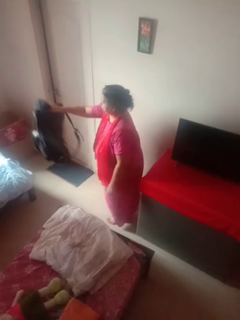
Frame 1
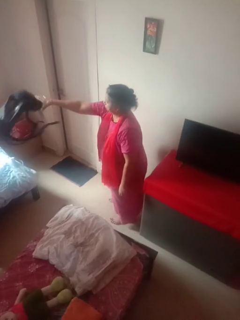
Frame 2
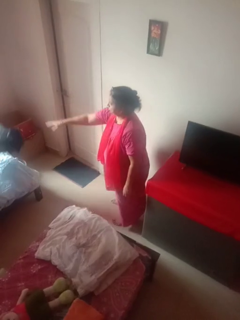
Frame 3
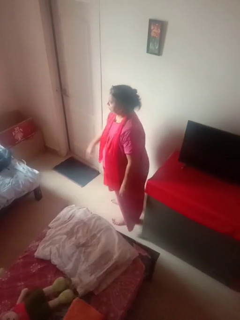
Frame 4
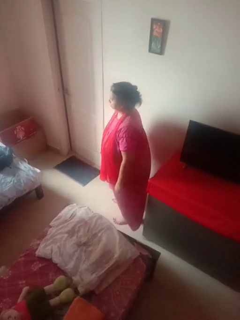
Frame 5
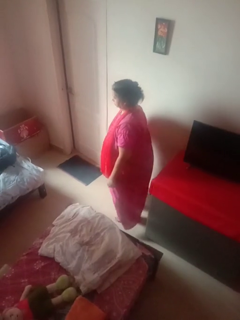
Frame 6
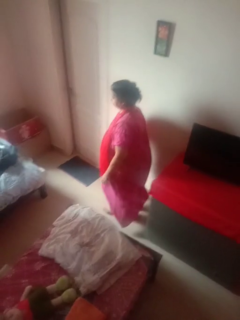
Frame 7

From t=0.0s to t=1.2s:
person throws object on bed

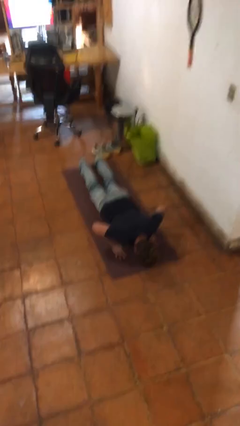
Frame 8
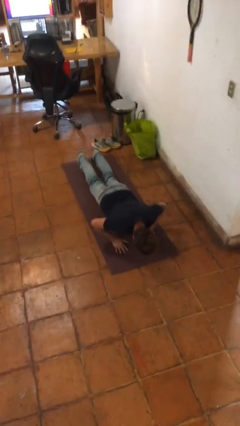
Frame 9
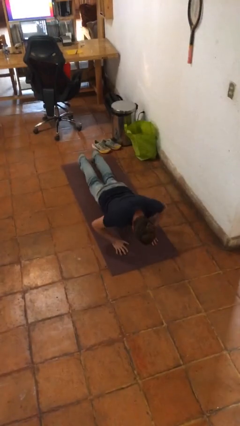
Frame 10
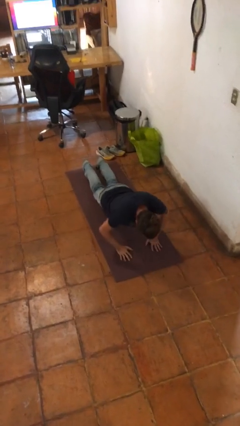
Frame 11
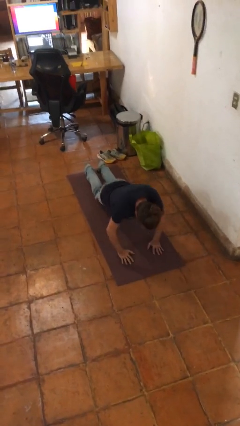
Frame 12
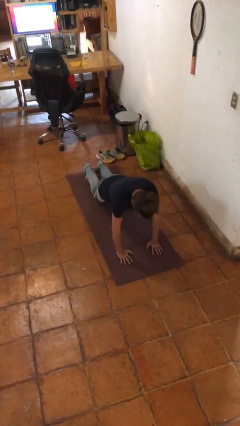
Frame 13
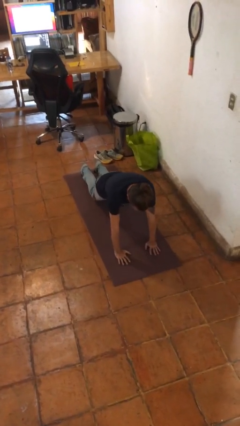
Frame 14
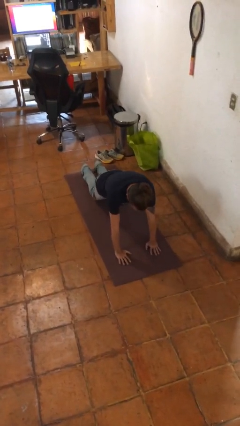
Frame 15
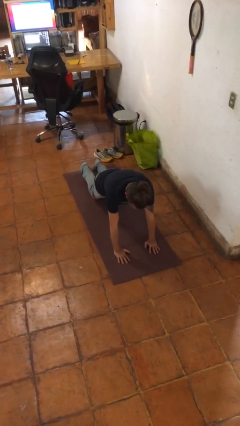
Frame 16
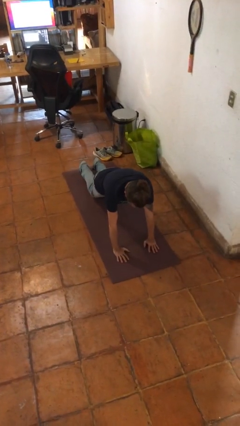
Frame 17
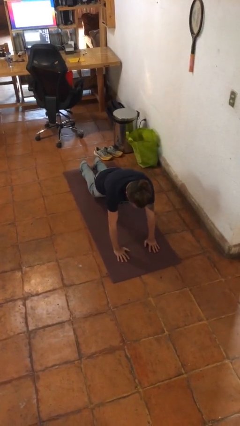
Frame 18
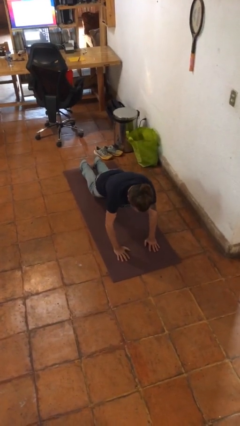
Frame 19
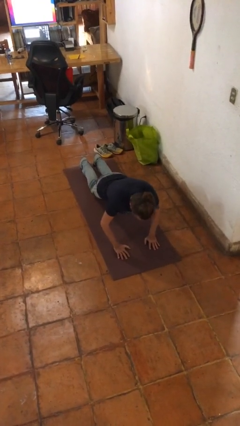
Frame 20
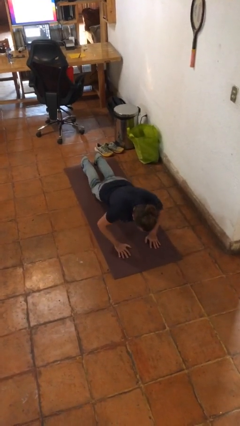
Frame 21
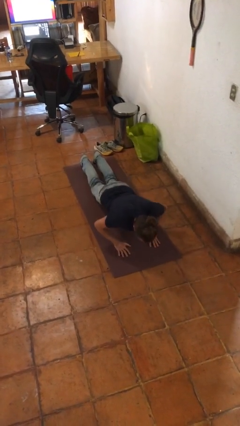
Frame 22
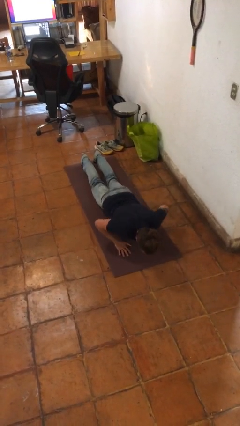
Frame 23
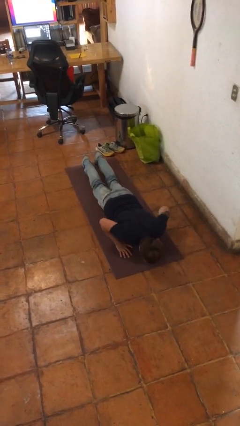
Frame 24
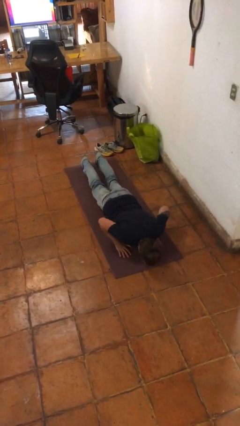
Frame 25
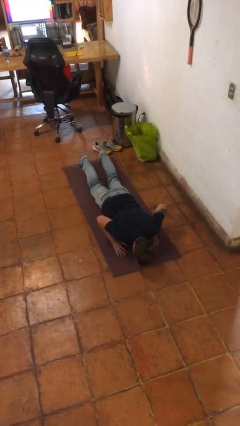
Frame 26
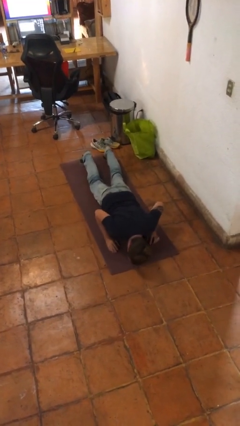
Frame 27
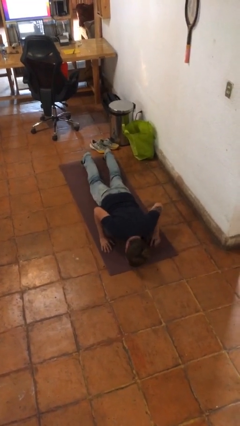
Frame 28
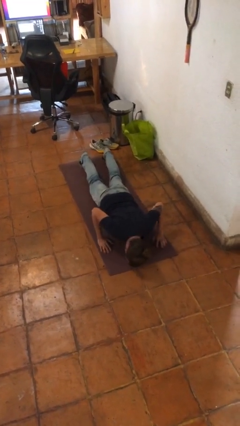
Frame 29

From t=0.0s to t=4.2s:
person exercises with pushup

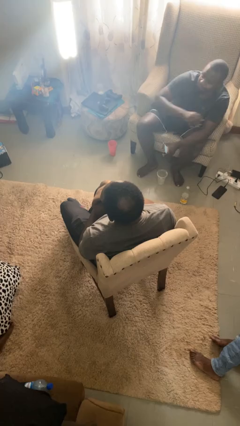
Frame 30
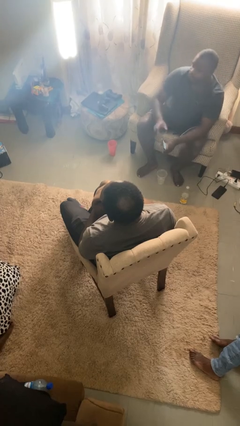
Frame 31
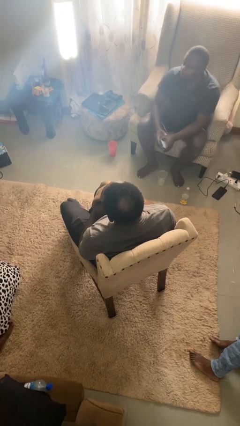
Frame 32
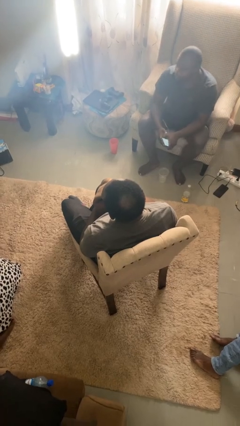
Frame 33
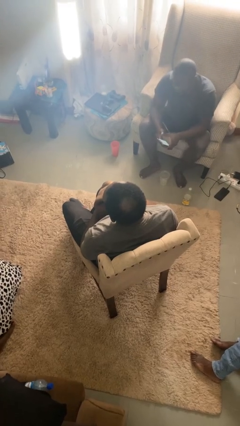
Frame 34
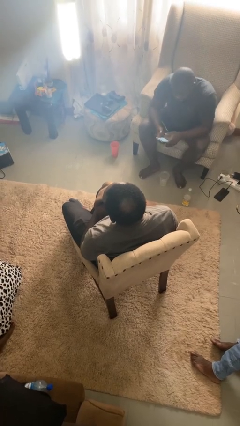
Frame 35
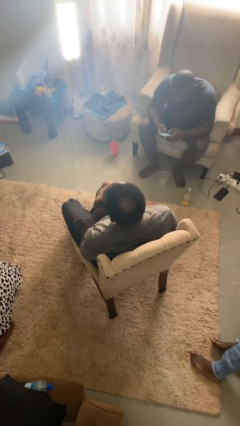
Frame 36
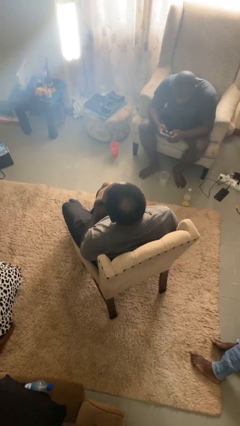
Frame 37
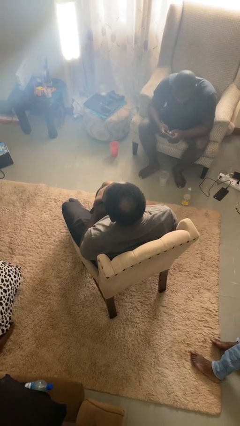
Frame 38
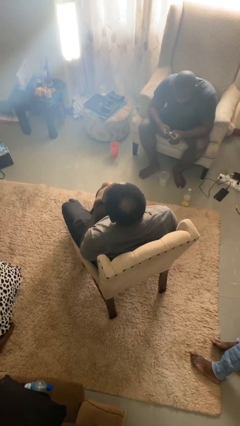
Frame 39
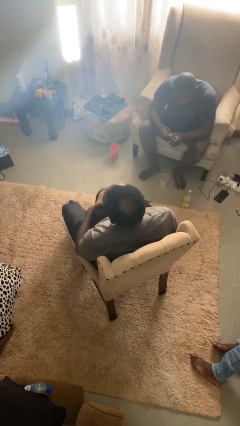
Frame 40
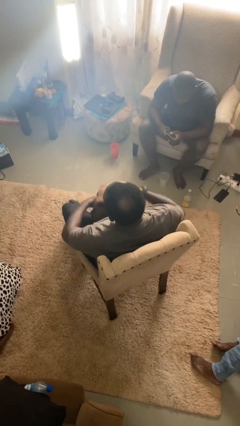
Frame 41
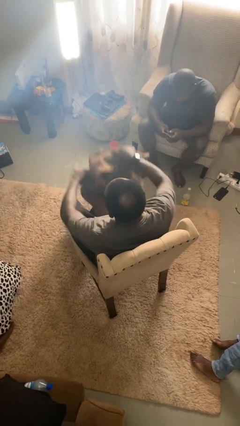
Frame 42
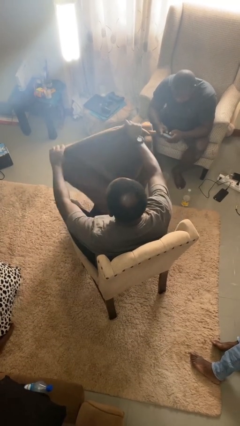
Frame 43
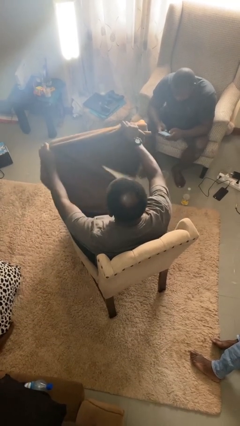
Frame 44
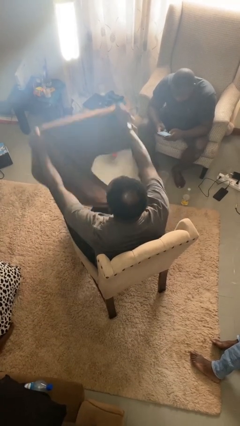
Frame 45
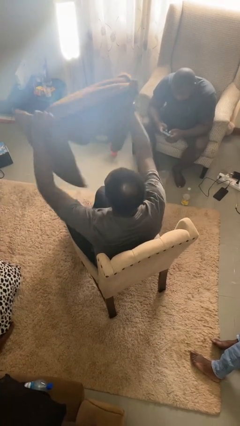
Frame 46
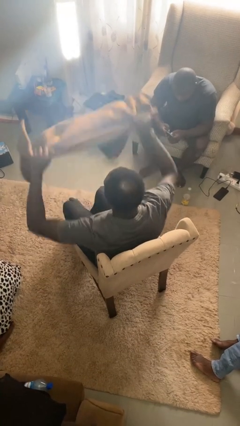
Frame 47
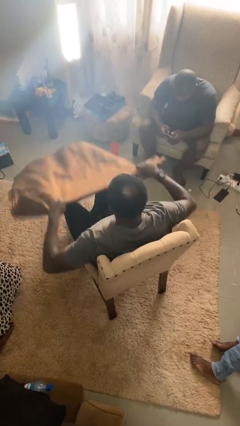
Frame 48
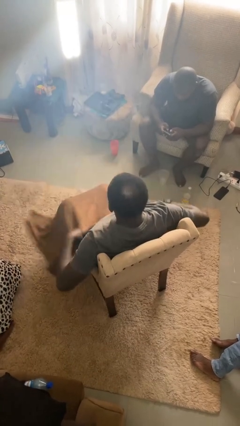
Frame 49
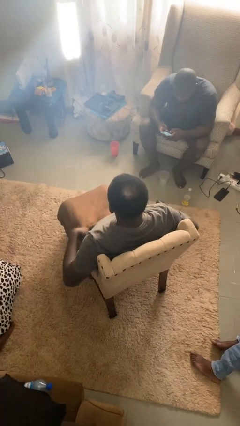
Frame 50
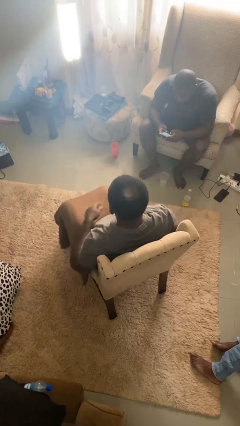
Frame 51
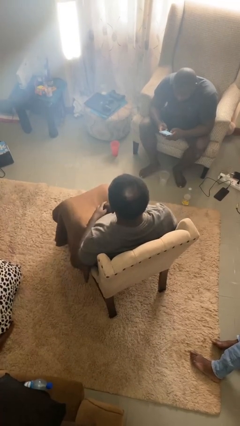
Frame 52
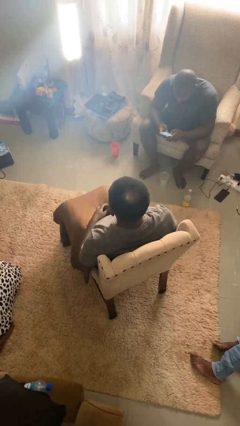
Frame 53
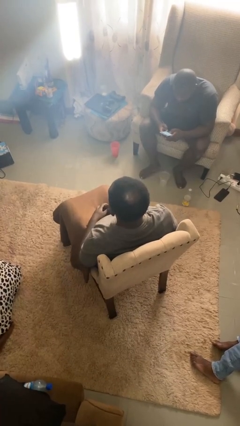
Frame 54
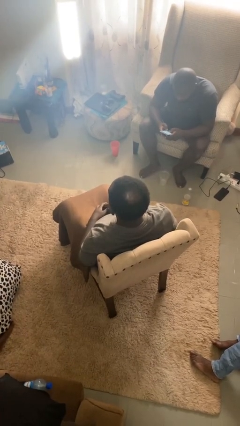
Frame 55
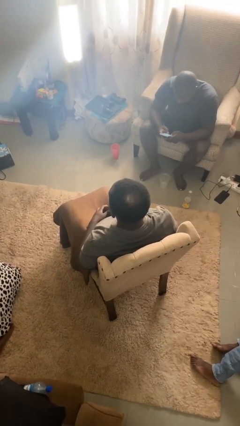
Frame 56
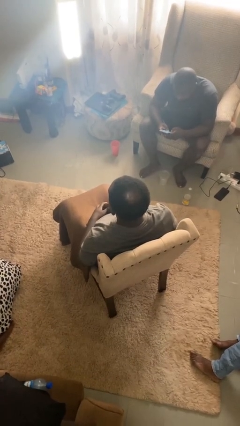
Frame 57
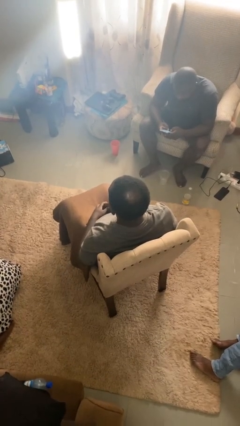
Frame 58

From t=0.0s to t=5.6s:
person covers with blanket

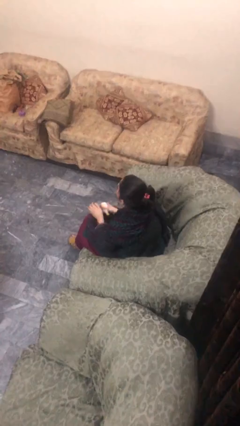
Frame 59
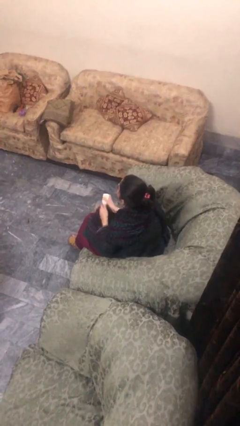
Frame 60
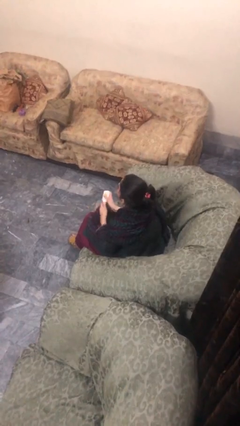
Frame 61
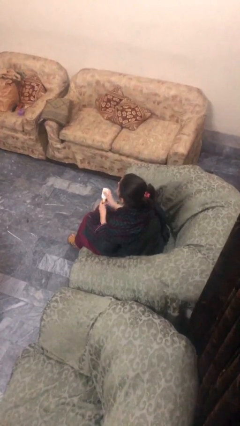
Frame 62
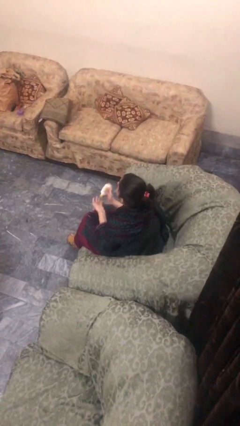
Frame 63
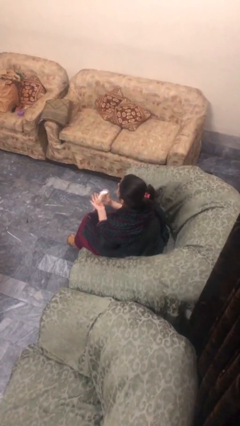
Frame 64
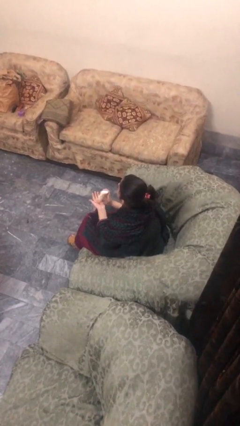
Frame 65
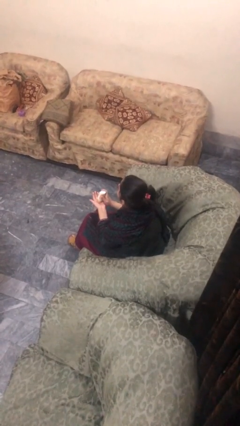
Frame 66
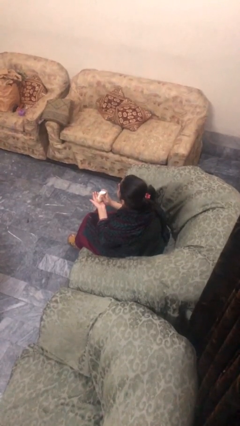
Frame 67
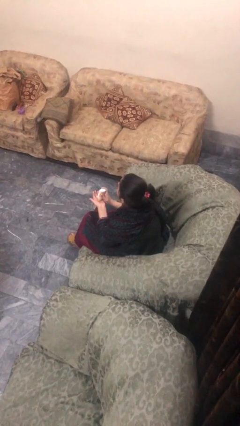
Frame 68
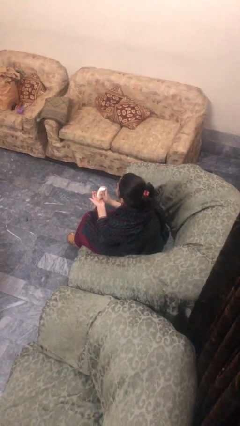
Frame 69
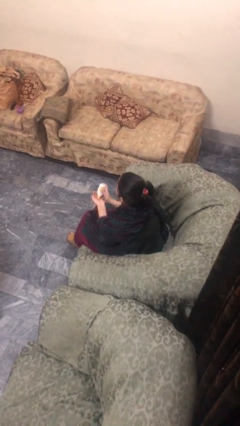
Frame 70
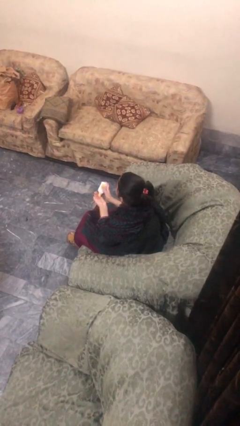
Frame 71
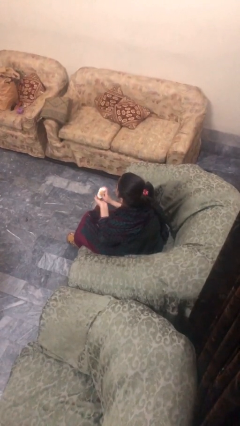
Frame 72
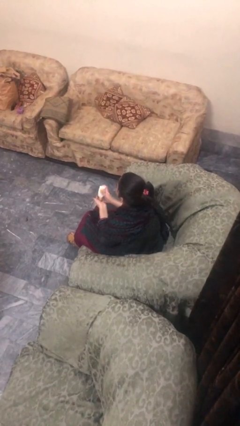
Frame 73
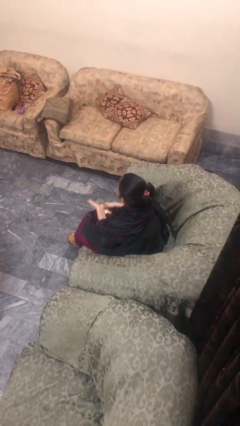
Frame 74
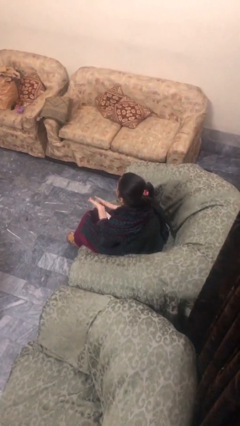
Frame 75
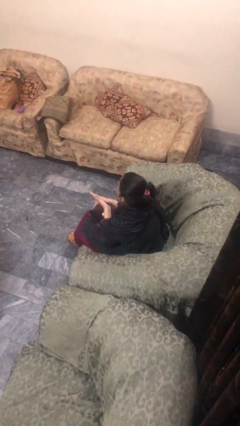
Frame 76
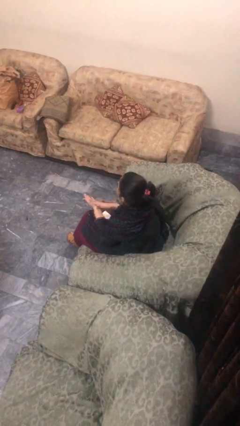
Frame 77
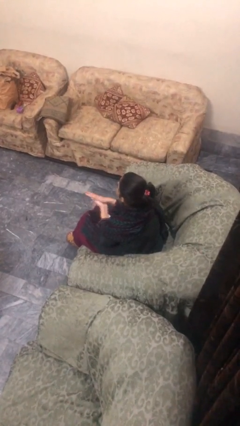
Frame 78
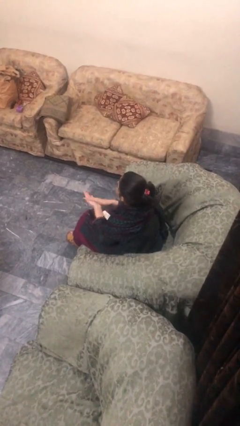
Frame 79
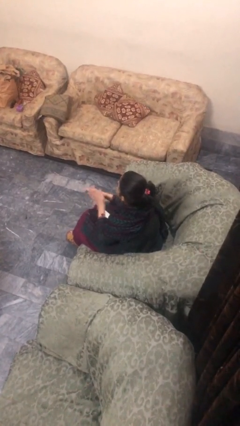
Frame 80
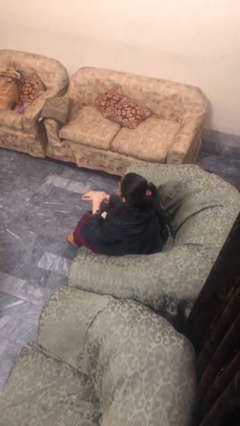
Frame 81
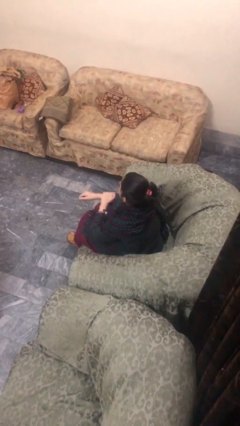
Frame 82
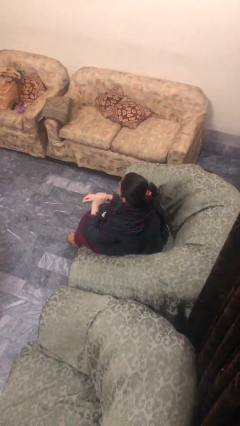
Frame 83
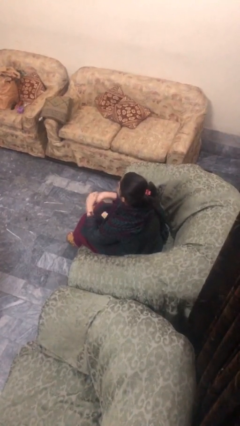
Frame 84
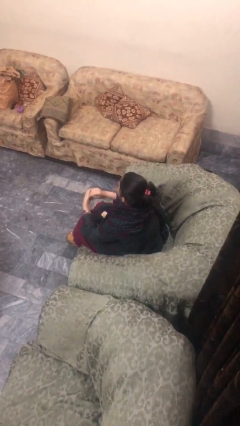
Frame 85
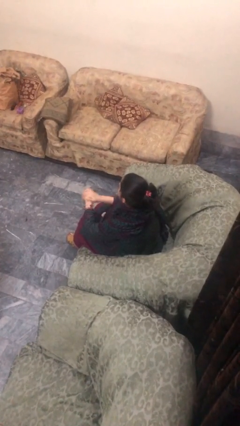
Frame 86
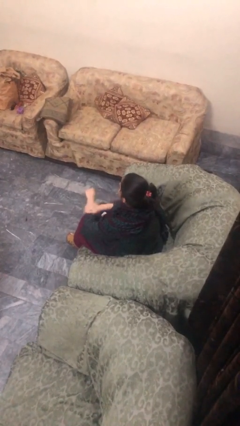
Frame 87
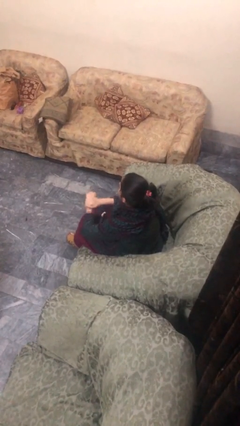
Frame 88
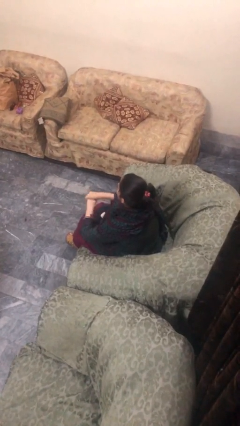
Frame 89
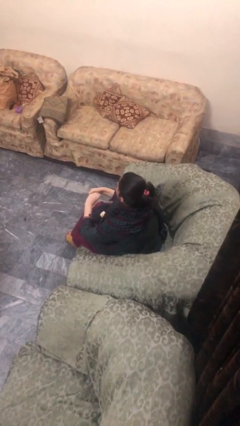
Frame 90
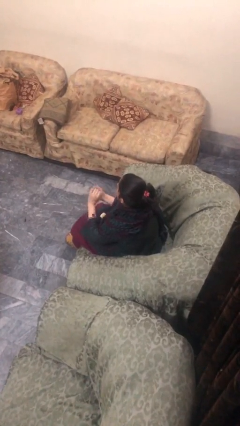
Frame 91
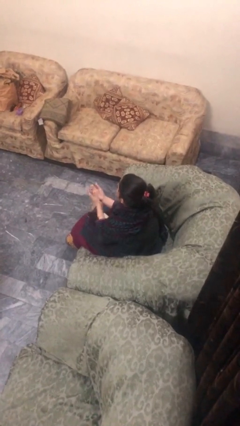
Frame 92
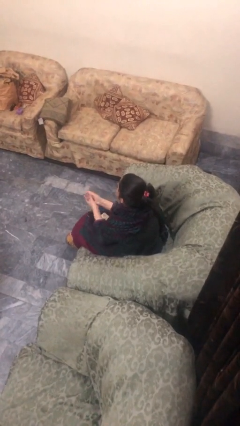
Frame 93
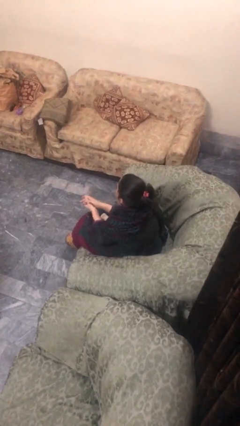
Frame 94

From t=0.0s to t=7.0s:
person applies sunscreen
